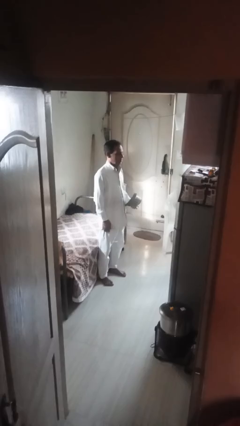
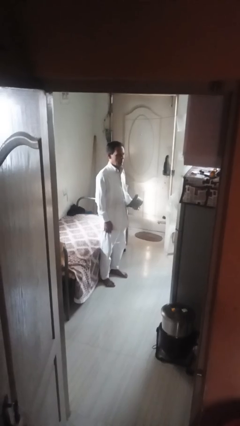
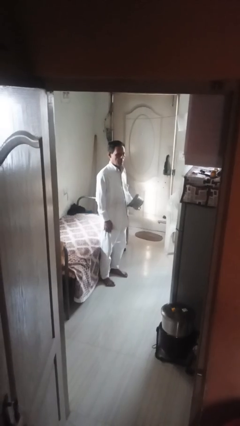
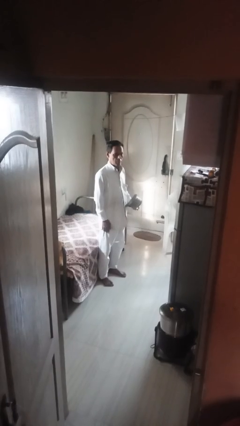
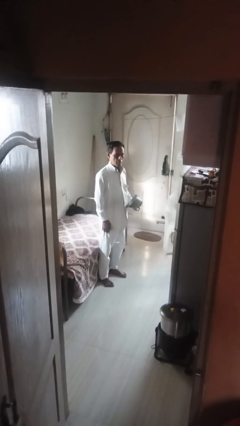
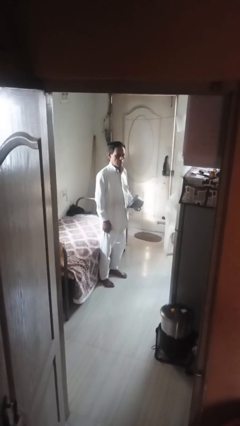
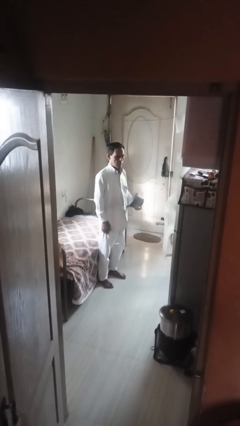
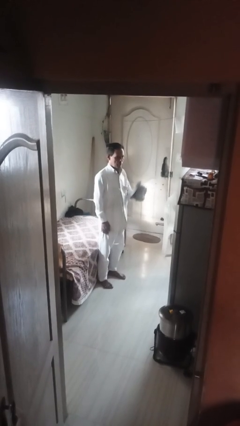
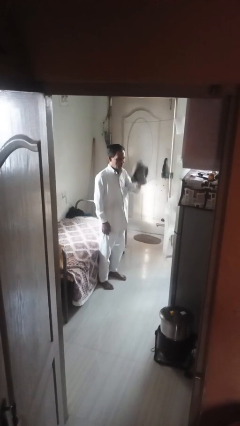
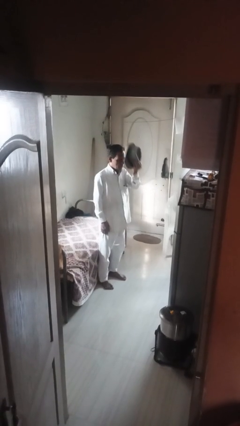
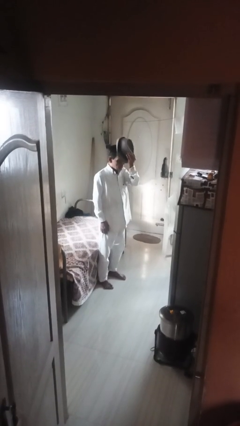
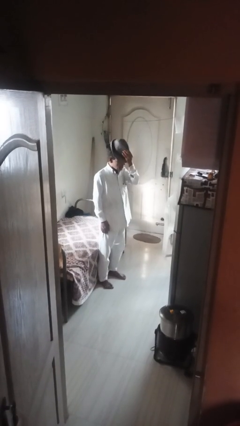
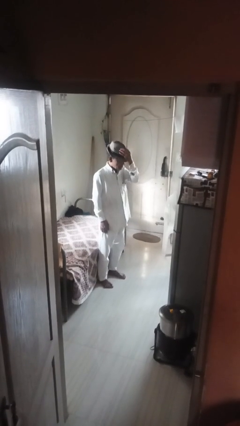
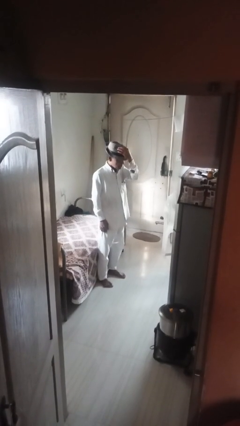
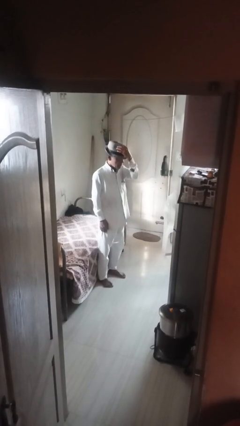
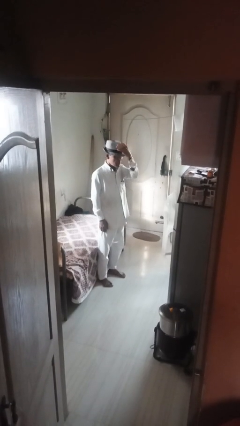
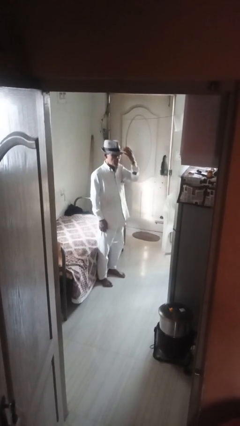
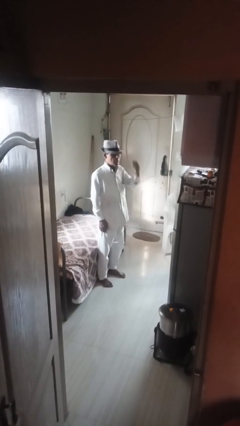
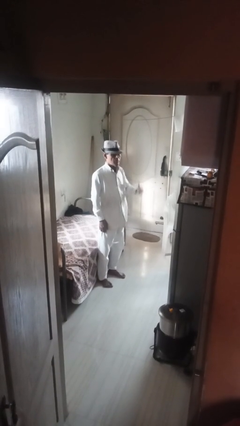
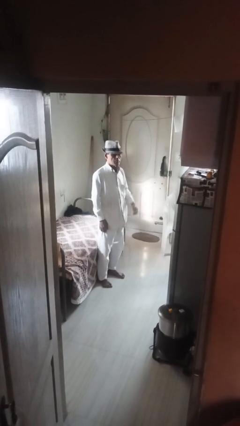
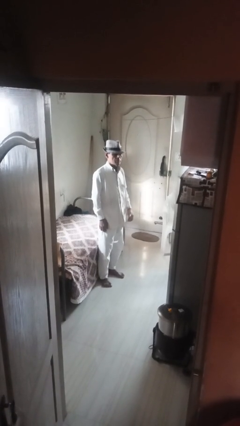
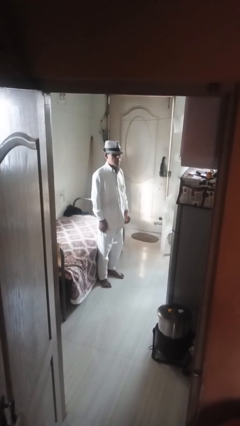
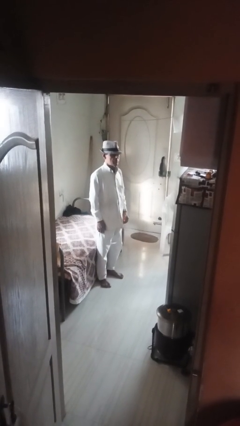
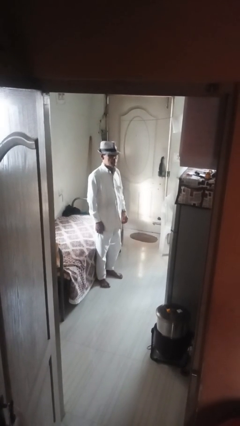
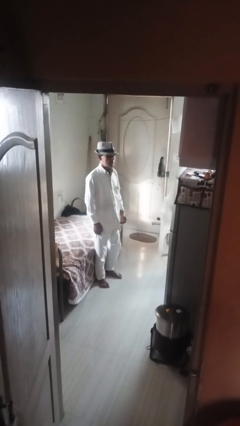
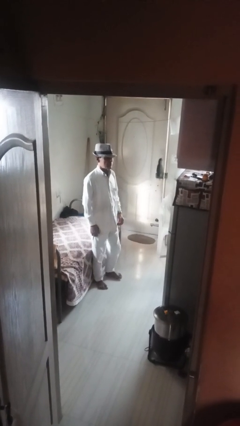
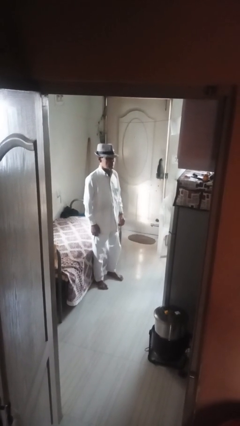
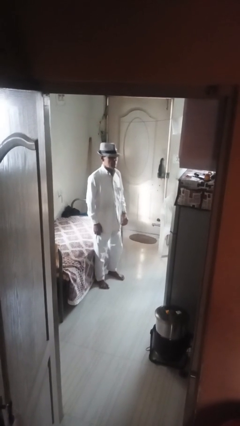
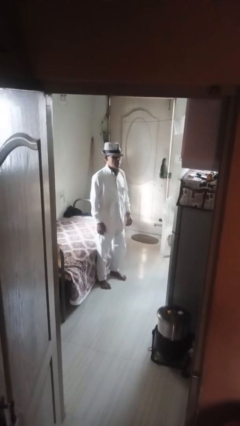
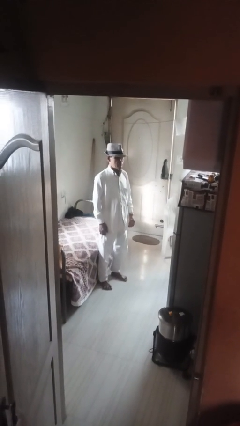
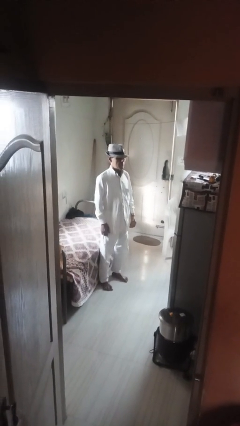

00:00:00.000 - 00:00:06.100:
person puts on hat

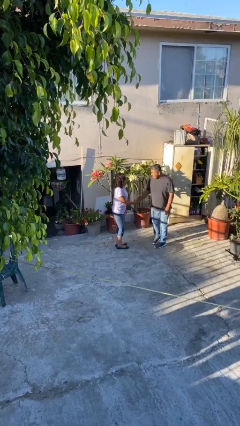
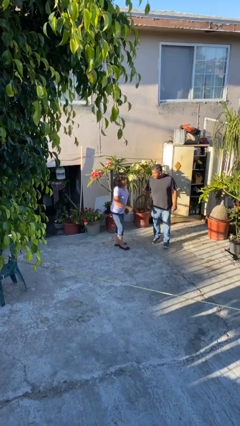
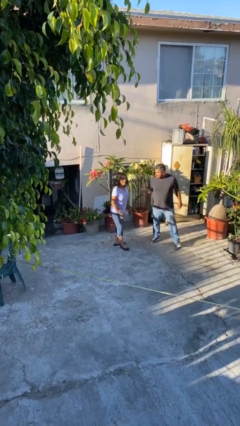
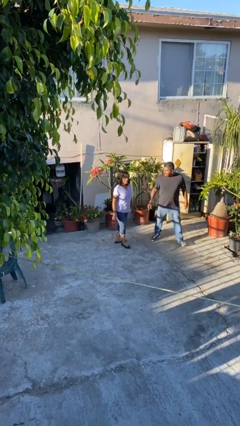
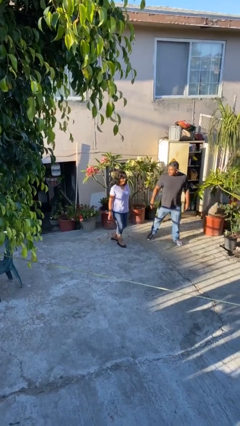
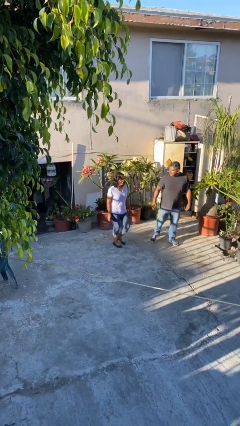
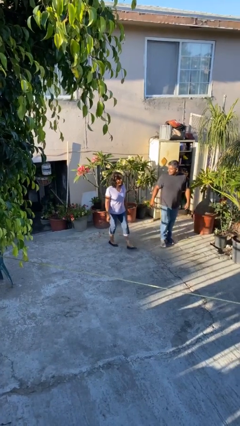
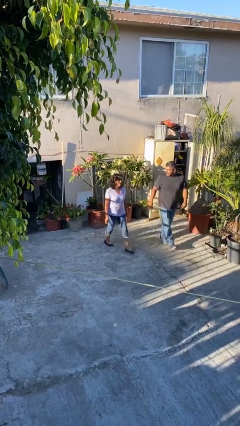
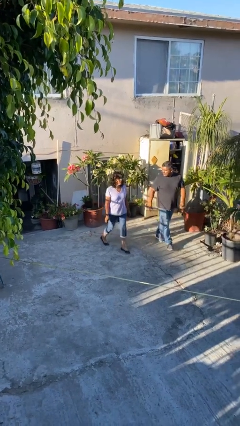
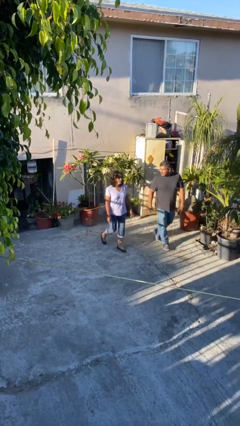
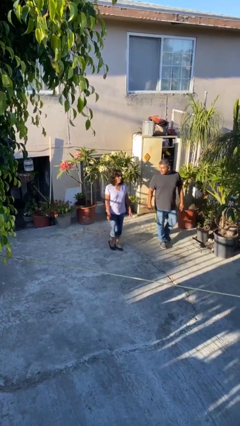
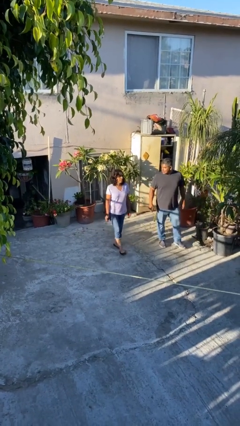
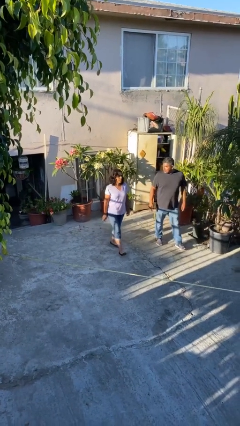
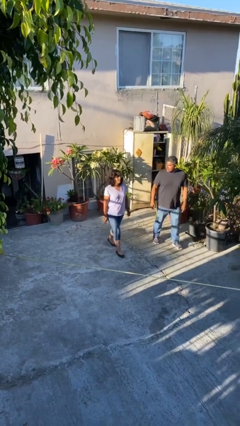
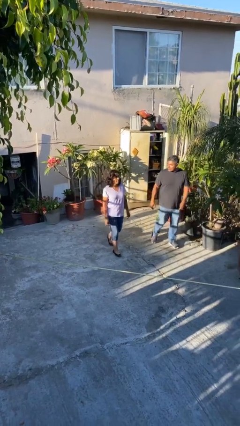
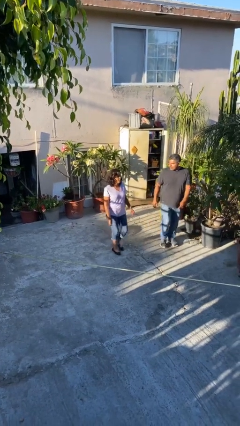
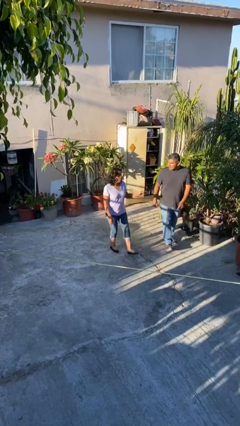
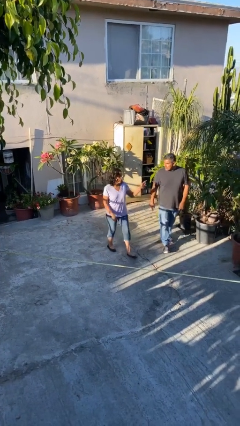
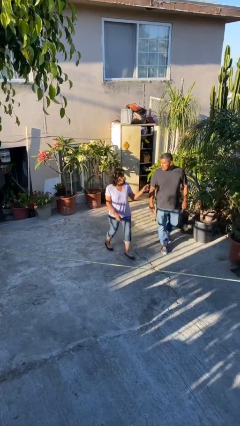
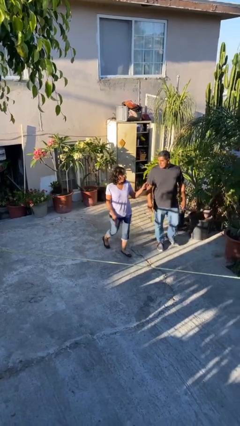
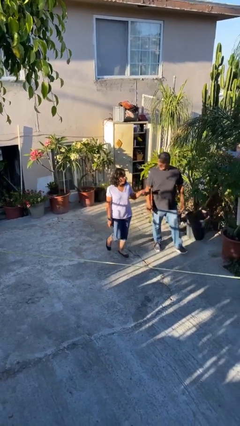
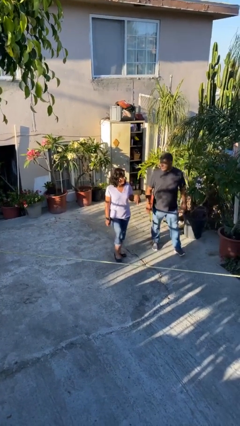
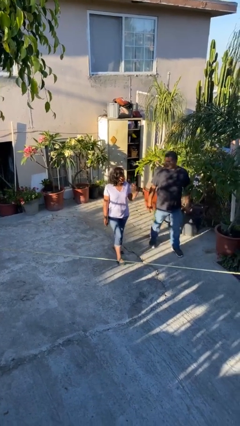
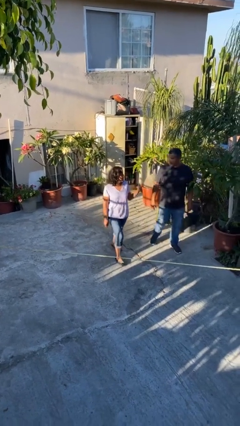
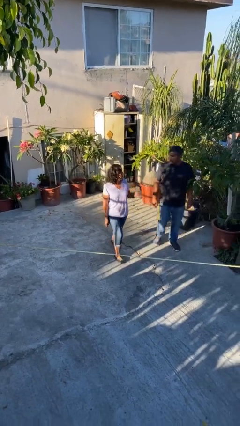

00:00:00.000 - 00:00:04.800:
person talks to person

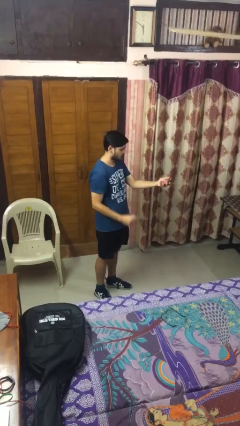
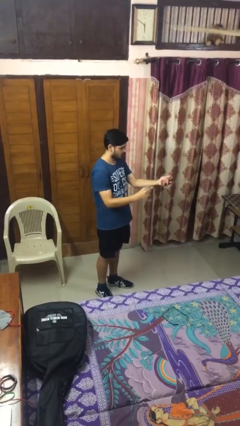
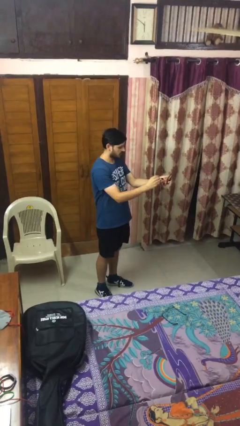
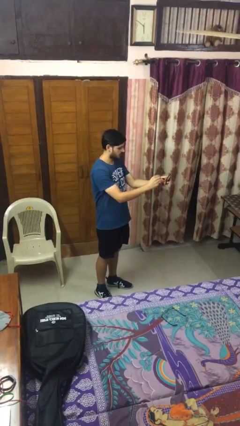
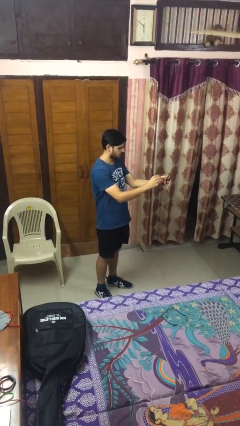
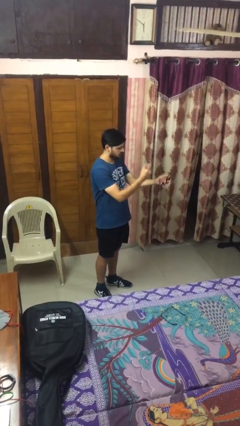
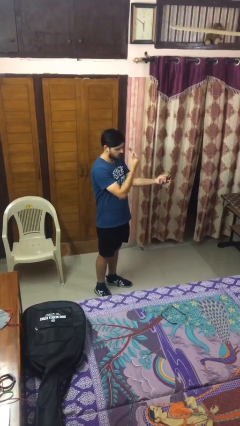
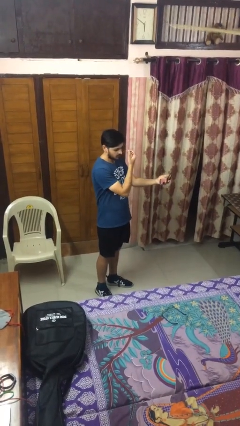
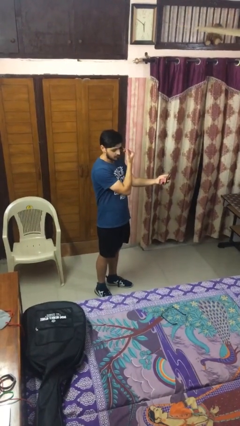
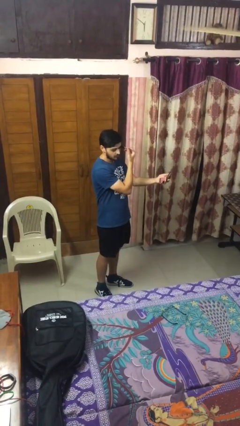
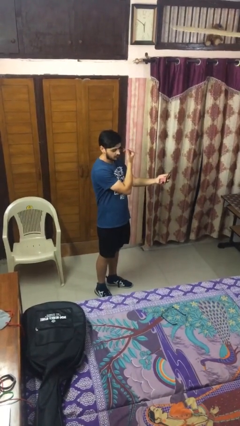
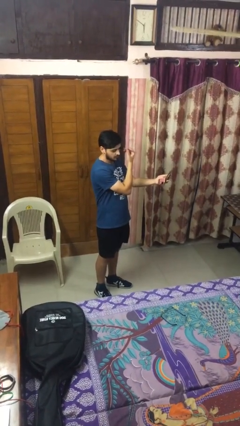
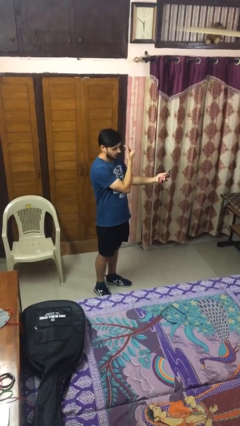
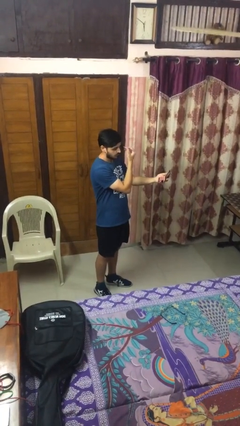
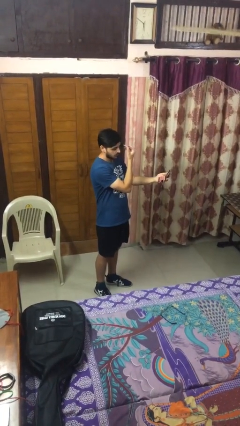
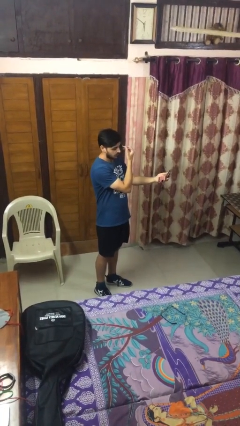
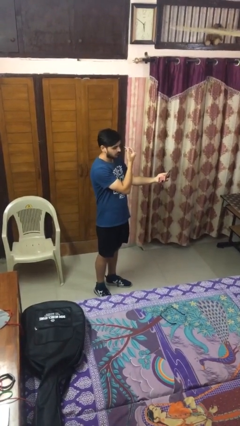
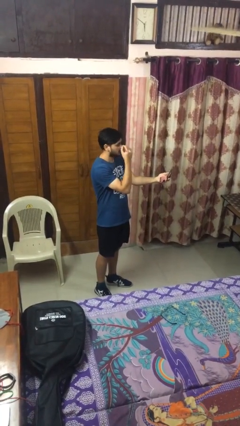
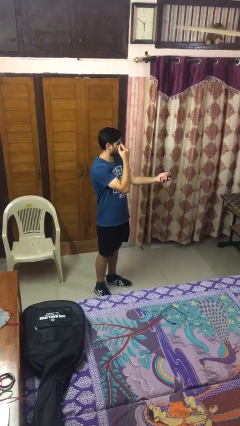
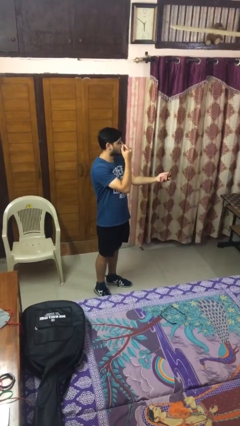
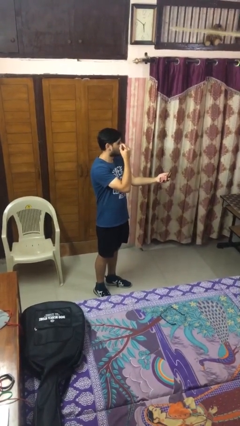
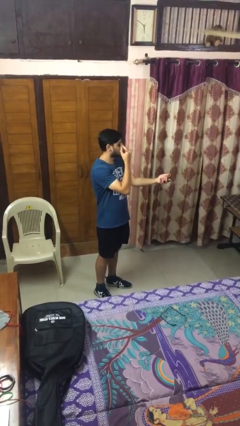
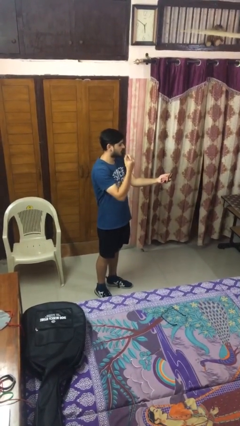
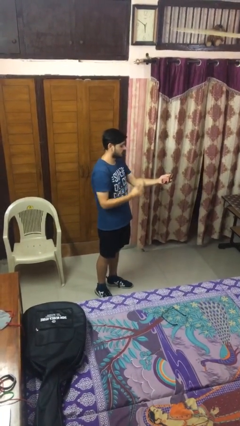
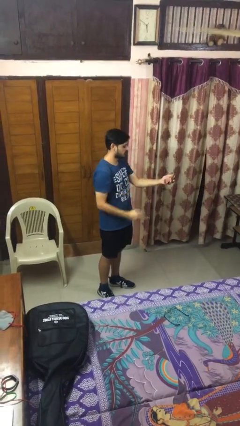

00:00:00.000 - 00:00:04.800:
person applies eye makeup

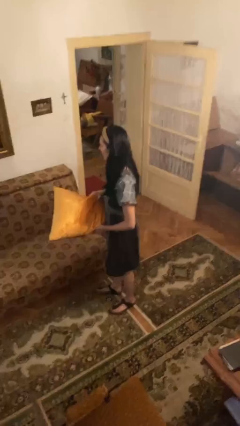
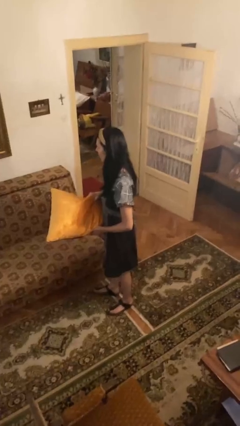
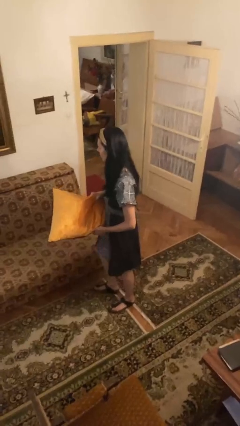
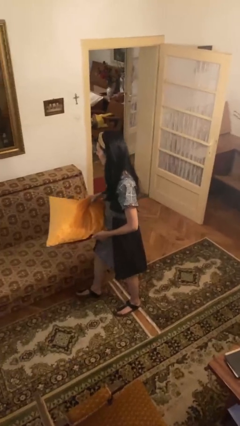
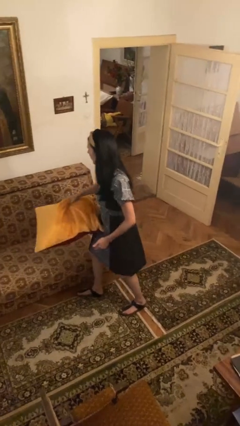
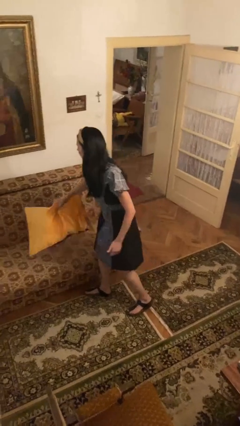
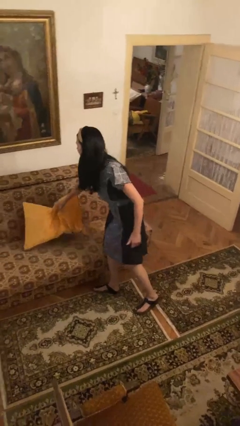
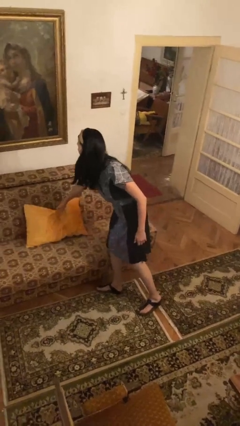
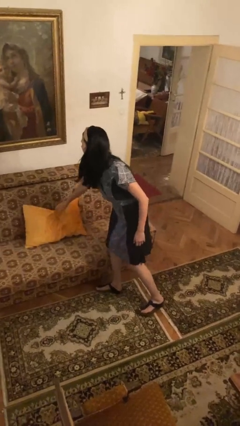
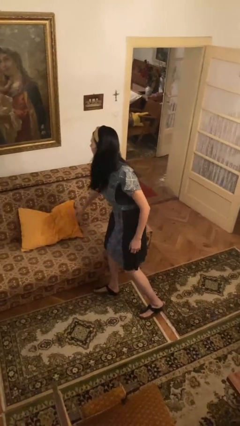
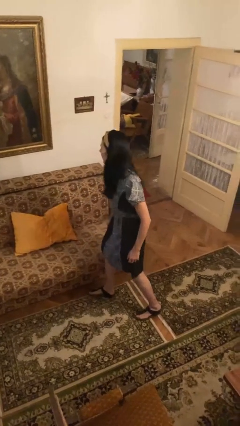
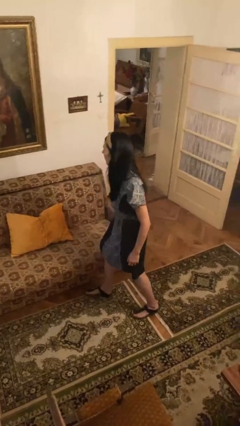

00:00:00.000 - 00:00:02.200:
person puts down object on couch
